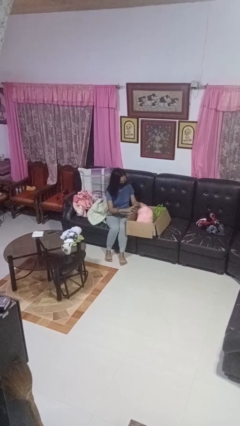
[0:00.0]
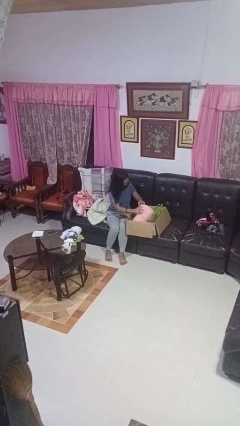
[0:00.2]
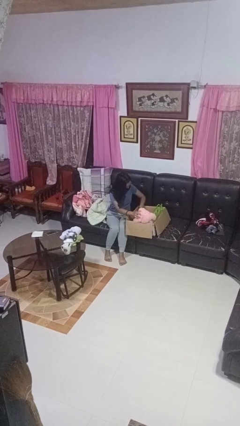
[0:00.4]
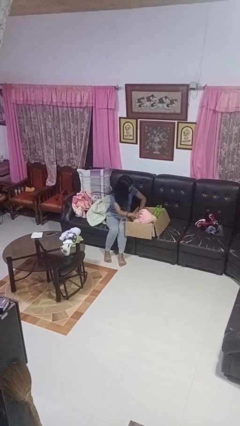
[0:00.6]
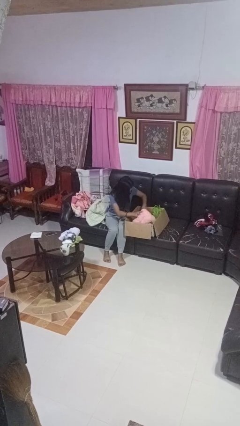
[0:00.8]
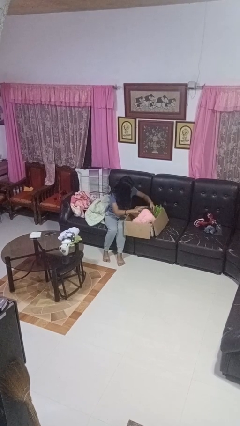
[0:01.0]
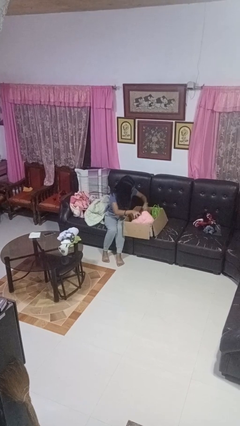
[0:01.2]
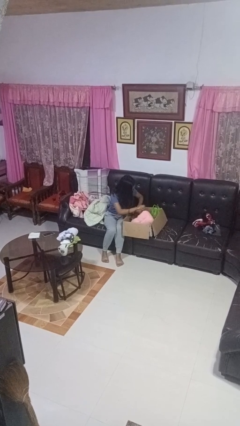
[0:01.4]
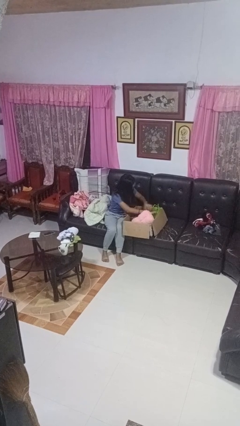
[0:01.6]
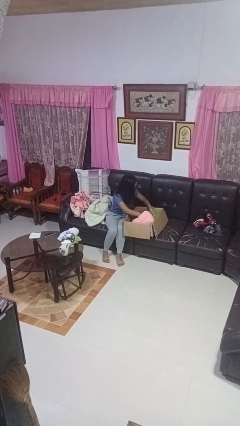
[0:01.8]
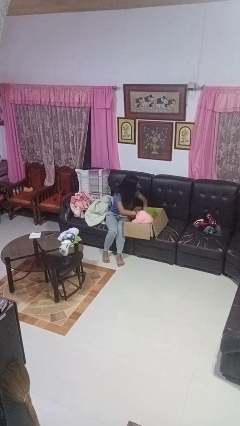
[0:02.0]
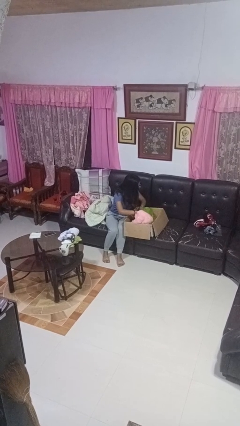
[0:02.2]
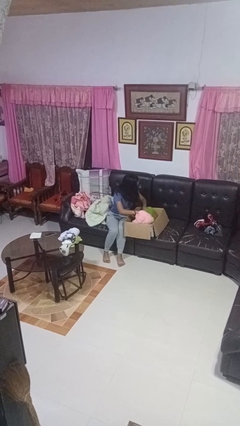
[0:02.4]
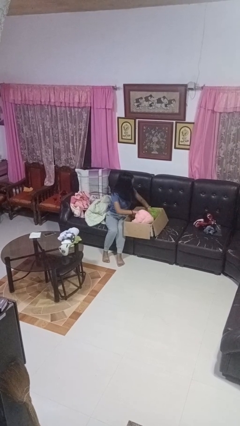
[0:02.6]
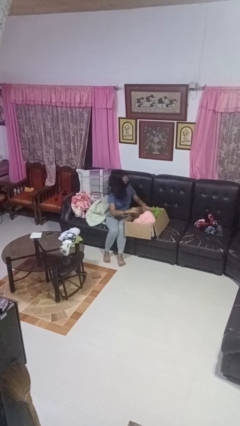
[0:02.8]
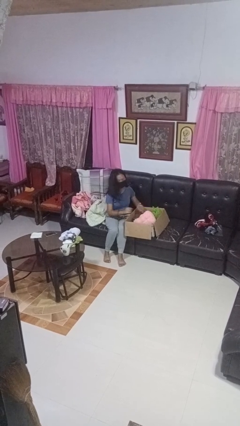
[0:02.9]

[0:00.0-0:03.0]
person searches in box

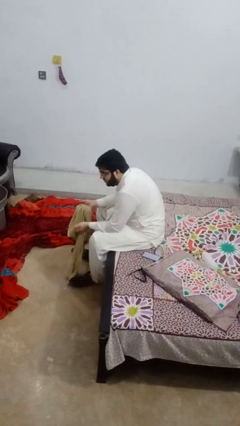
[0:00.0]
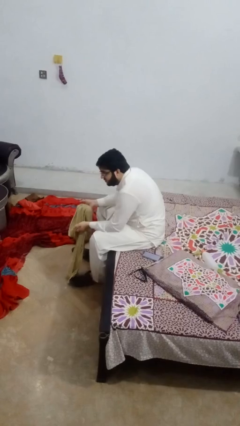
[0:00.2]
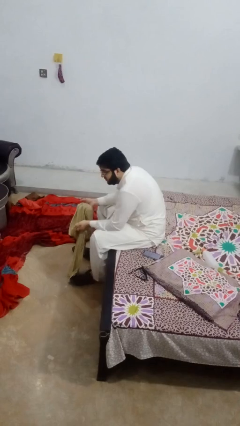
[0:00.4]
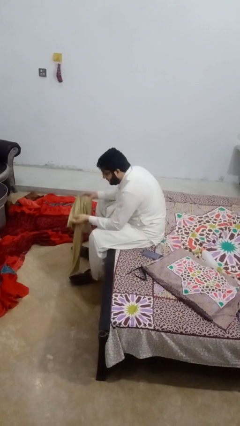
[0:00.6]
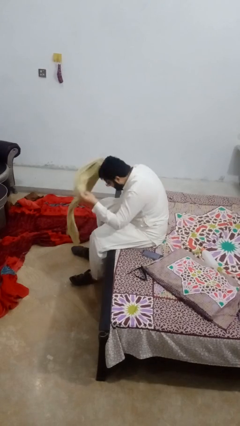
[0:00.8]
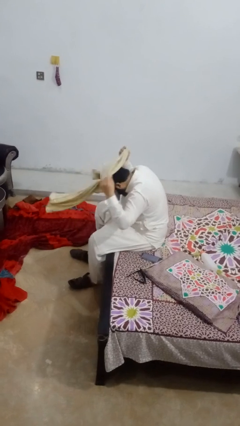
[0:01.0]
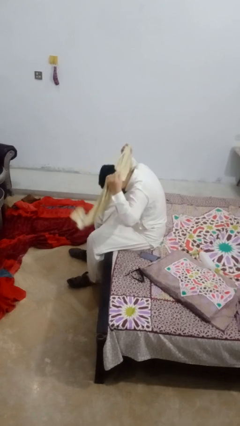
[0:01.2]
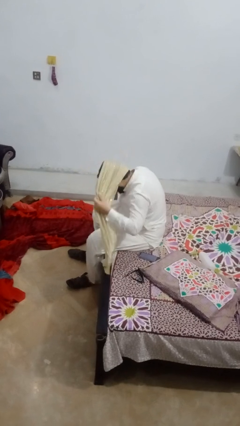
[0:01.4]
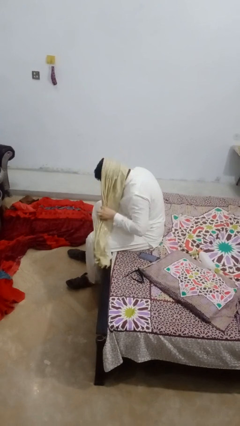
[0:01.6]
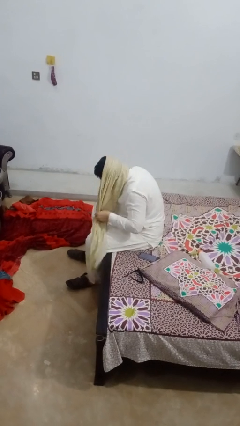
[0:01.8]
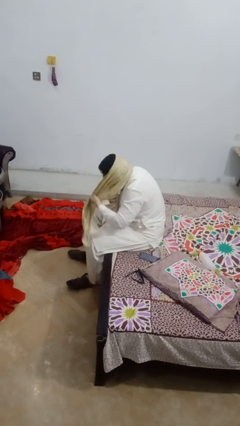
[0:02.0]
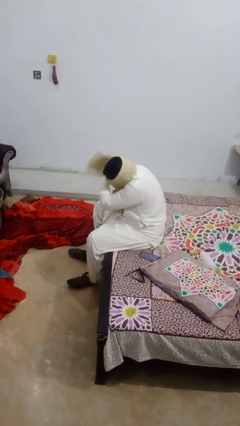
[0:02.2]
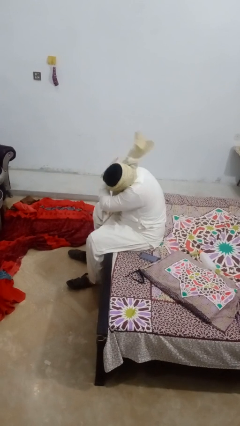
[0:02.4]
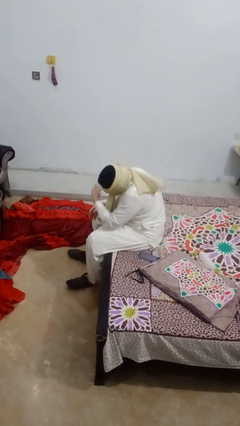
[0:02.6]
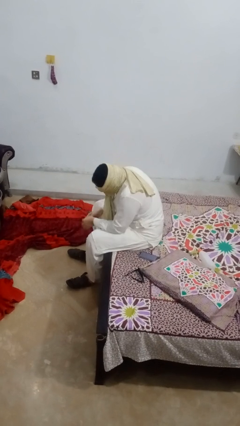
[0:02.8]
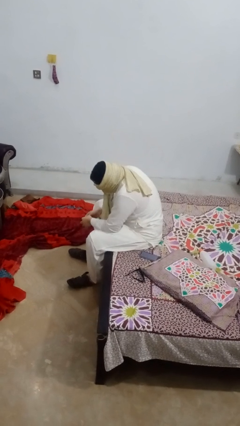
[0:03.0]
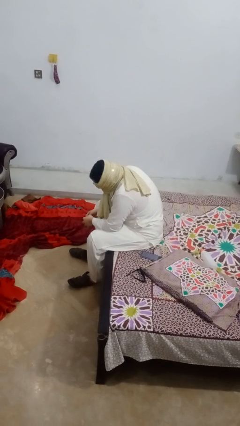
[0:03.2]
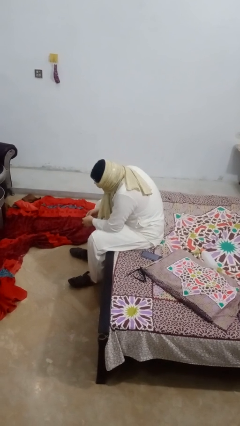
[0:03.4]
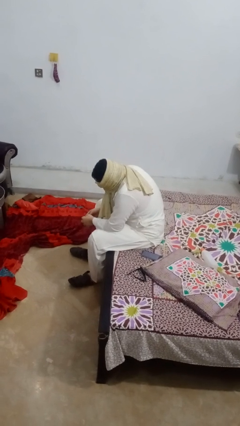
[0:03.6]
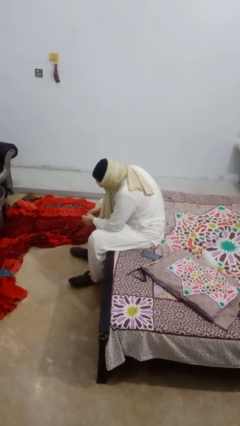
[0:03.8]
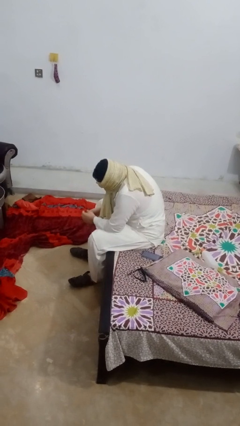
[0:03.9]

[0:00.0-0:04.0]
person puts on scarf

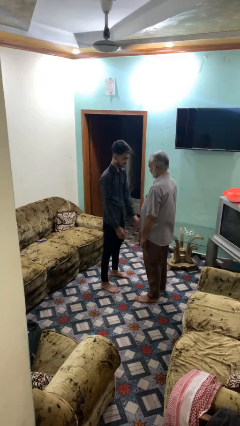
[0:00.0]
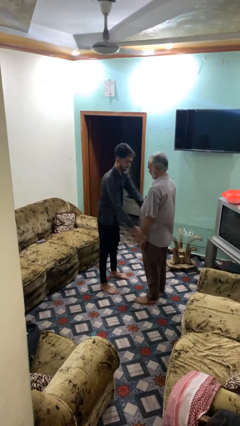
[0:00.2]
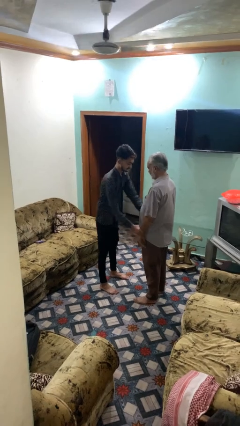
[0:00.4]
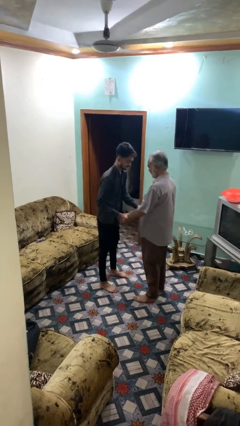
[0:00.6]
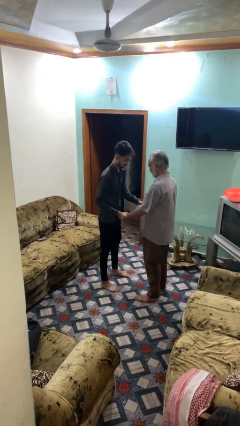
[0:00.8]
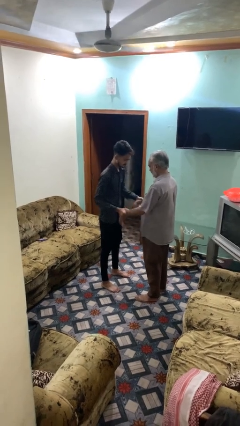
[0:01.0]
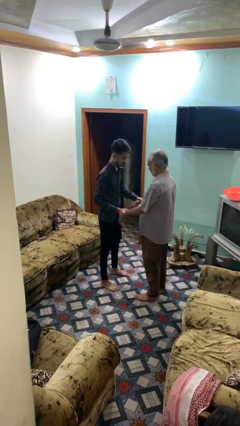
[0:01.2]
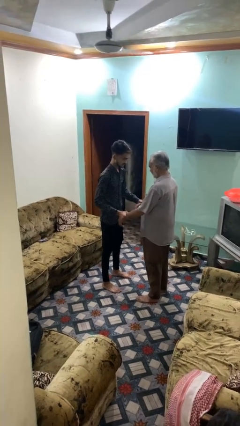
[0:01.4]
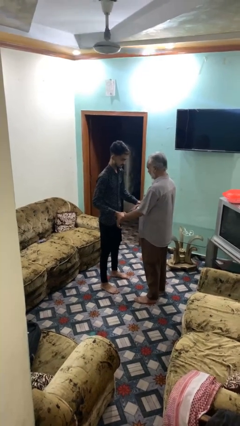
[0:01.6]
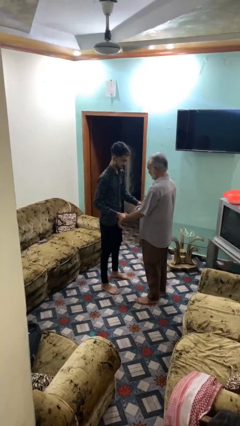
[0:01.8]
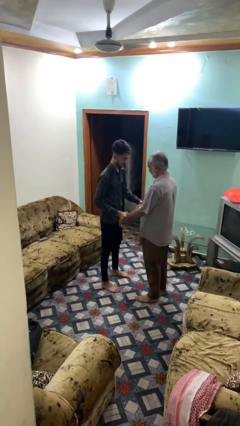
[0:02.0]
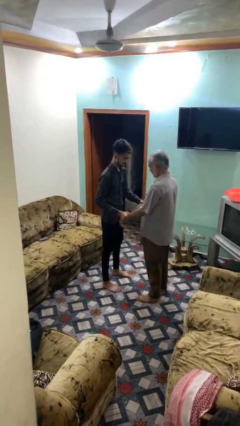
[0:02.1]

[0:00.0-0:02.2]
person grabs person by forearm

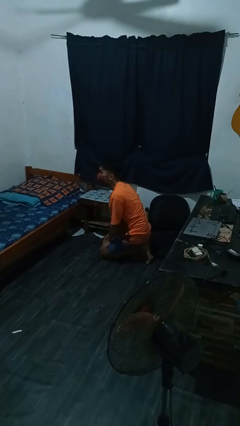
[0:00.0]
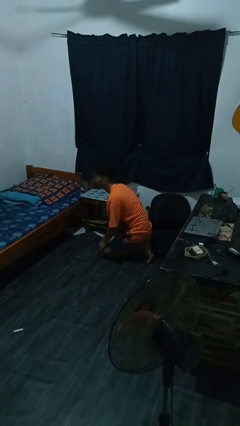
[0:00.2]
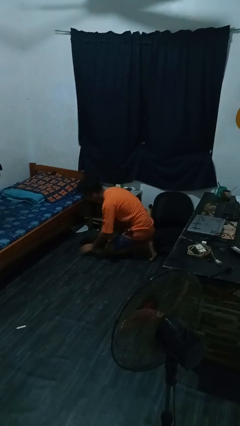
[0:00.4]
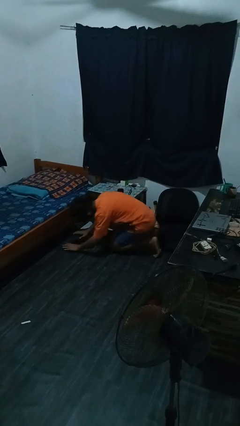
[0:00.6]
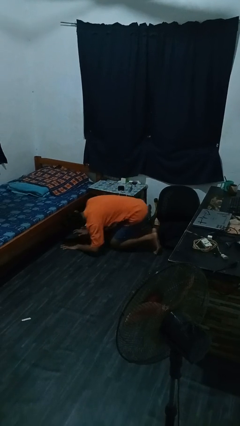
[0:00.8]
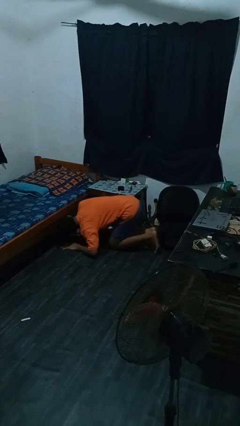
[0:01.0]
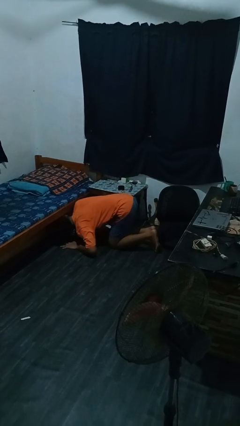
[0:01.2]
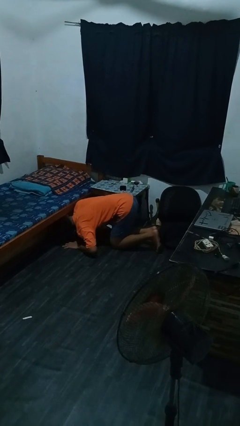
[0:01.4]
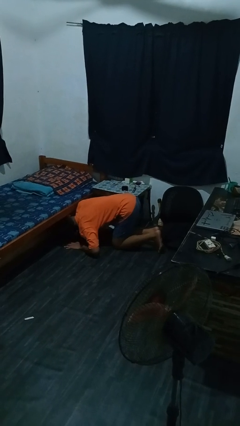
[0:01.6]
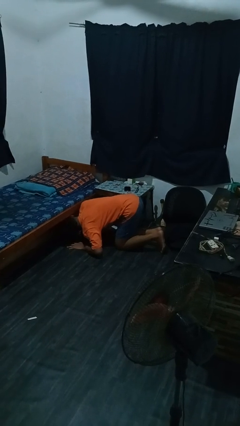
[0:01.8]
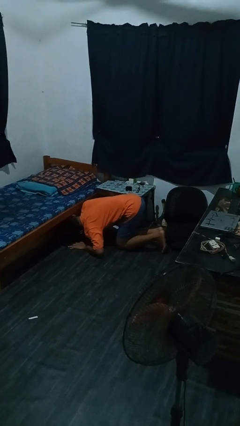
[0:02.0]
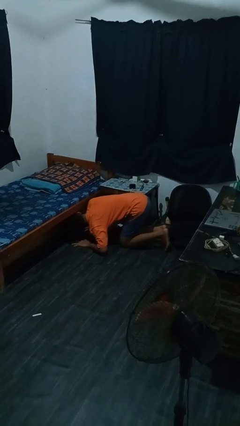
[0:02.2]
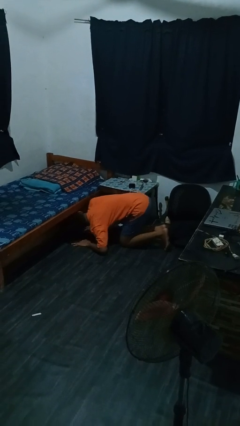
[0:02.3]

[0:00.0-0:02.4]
person searches under bed

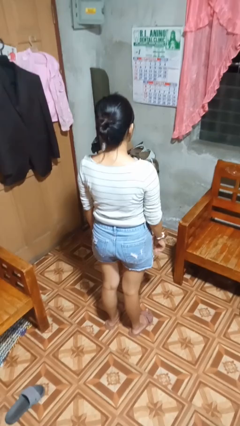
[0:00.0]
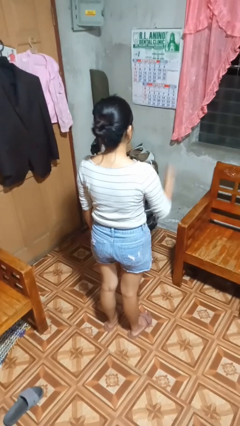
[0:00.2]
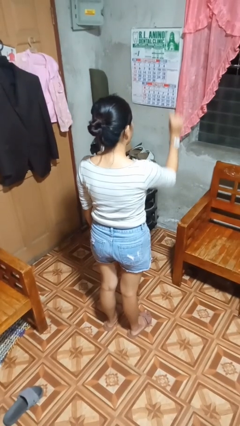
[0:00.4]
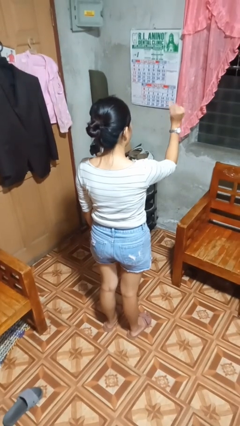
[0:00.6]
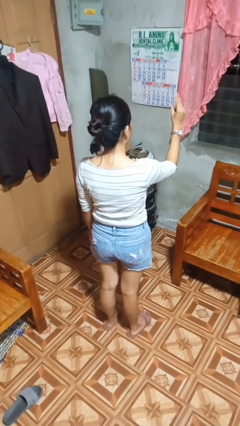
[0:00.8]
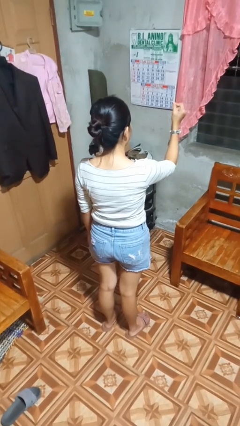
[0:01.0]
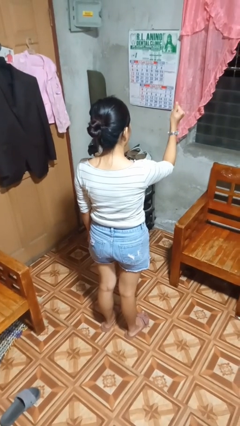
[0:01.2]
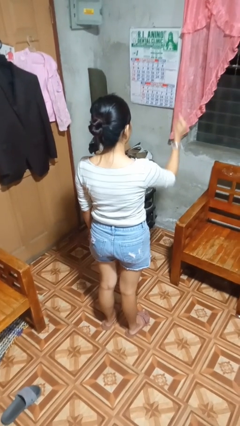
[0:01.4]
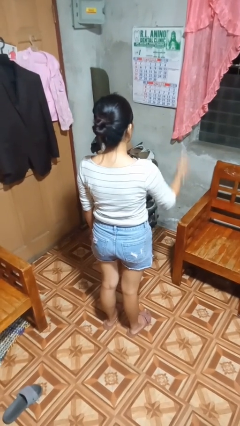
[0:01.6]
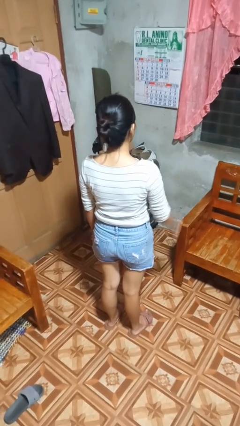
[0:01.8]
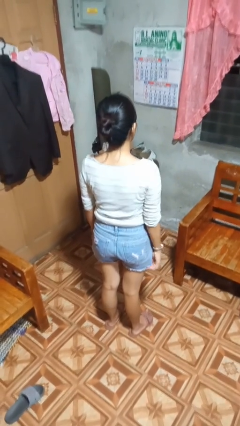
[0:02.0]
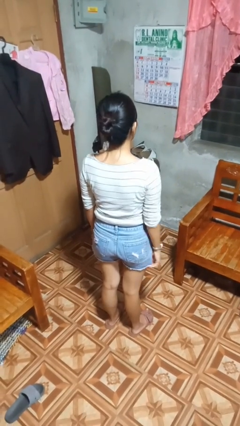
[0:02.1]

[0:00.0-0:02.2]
person snaps fingers

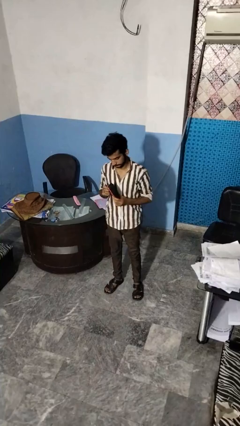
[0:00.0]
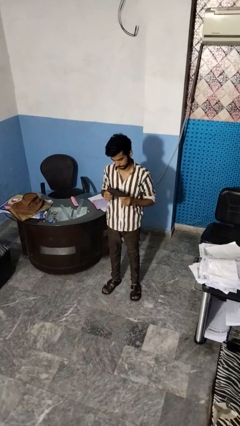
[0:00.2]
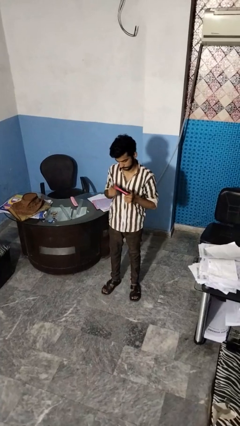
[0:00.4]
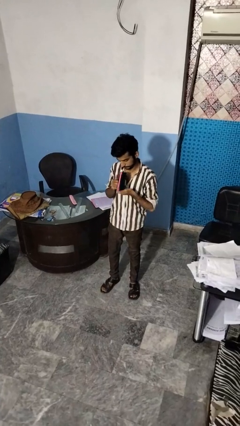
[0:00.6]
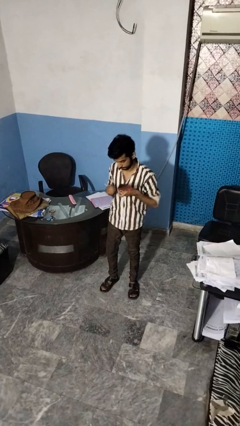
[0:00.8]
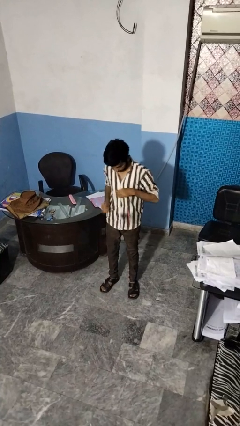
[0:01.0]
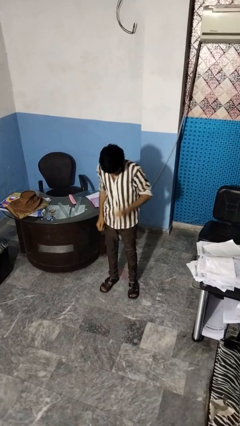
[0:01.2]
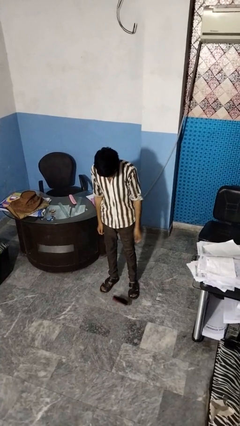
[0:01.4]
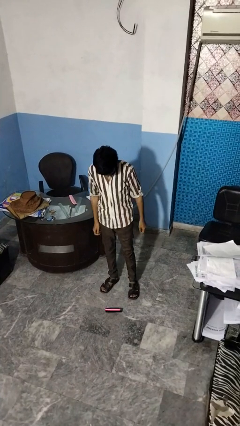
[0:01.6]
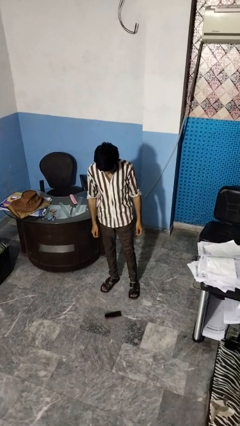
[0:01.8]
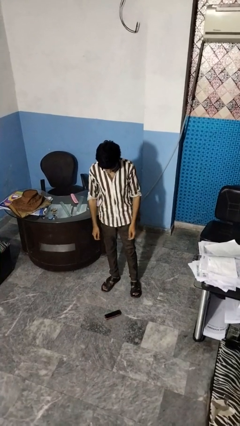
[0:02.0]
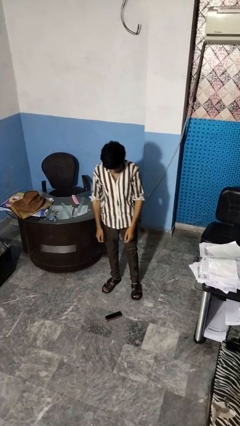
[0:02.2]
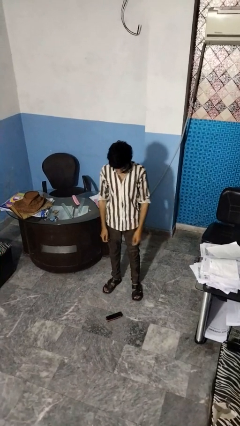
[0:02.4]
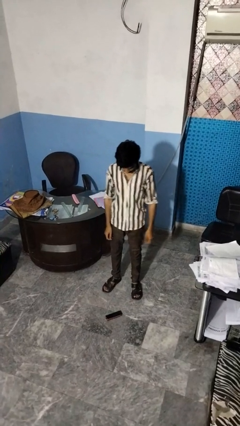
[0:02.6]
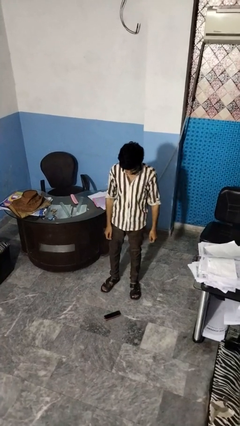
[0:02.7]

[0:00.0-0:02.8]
person drops object

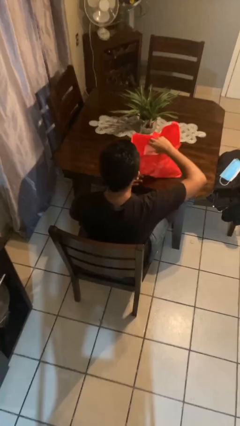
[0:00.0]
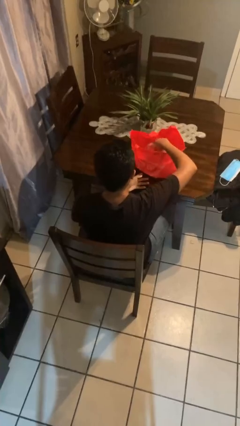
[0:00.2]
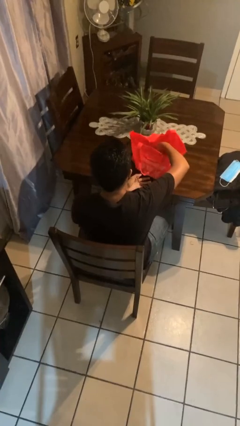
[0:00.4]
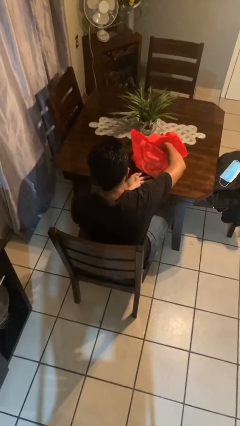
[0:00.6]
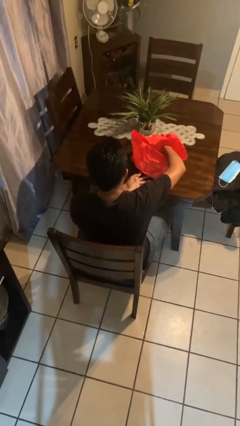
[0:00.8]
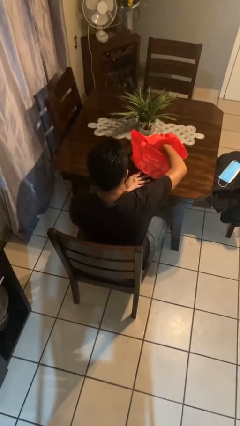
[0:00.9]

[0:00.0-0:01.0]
person puts object into bag
